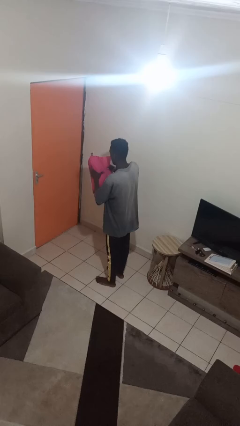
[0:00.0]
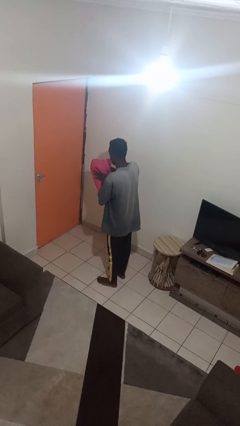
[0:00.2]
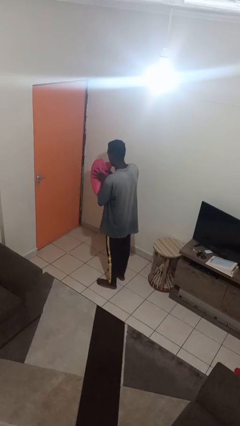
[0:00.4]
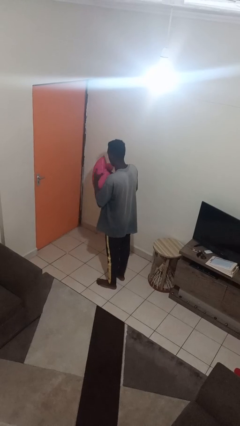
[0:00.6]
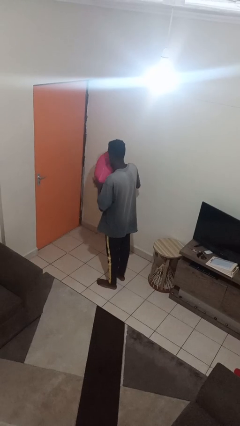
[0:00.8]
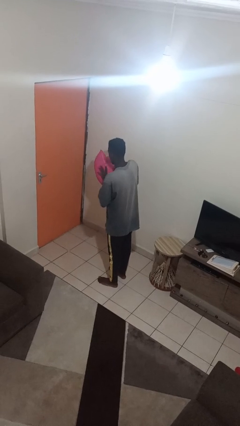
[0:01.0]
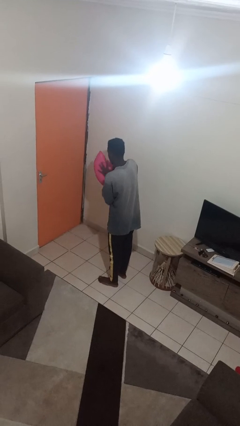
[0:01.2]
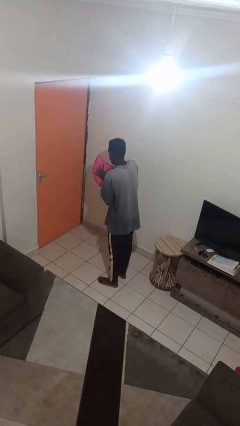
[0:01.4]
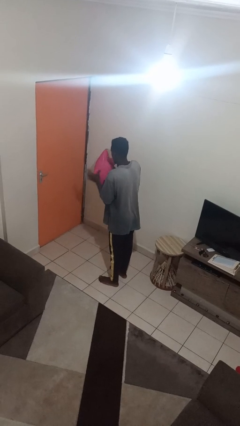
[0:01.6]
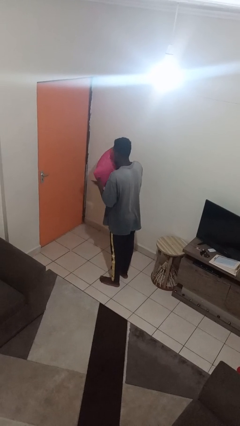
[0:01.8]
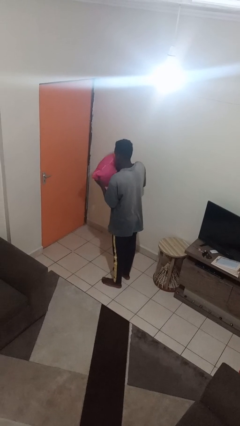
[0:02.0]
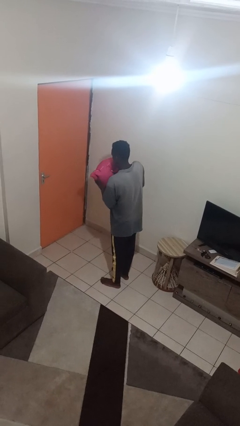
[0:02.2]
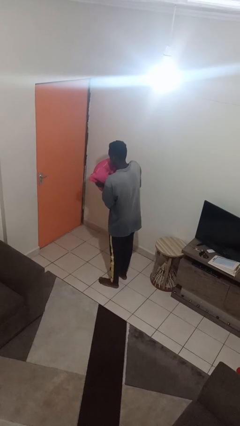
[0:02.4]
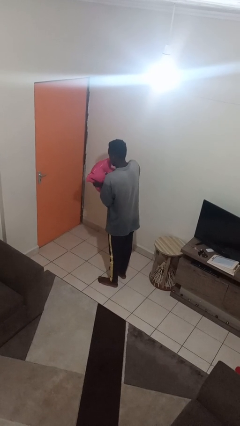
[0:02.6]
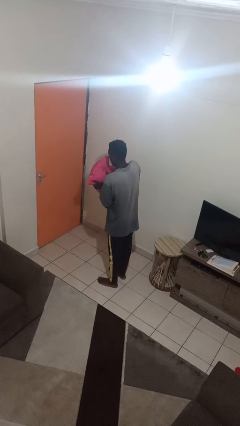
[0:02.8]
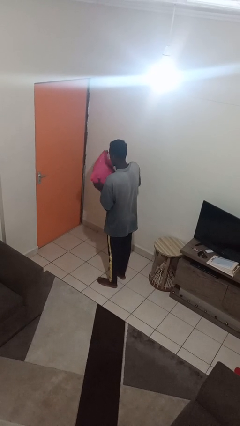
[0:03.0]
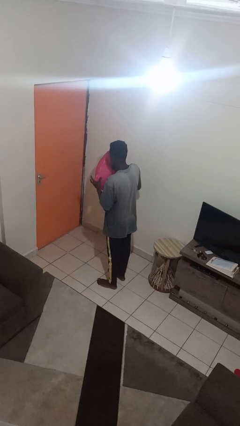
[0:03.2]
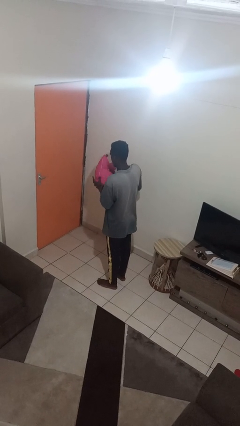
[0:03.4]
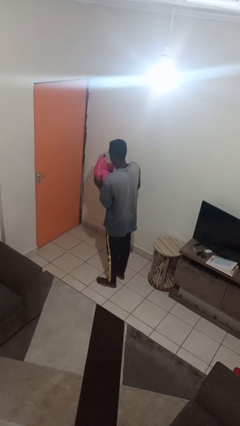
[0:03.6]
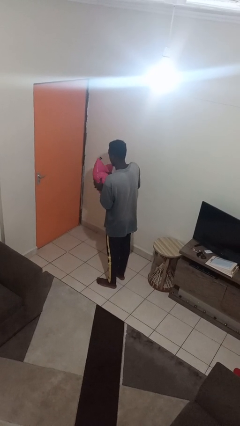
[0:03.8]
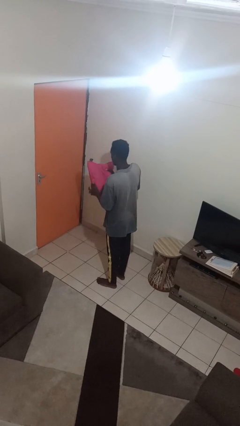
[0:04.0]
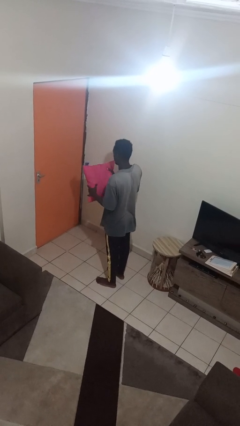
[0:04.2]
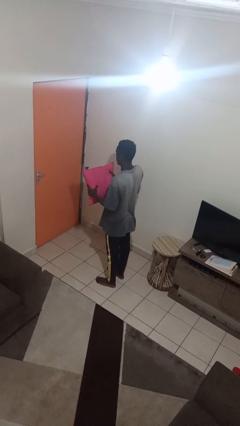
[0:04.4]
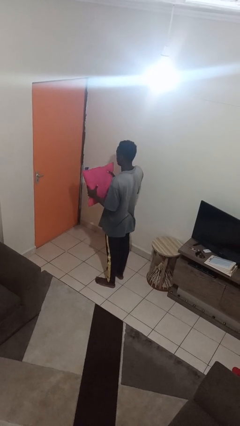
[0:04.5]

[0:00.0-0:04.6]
person squeezes object

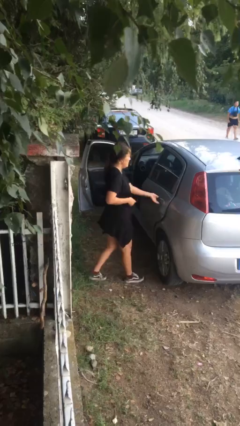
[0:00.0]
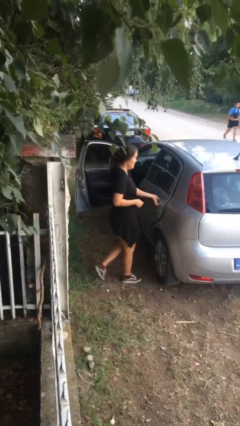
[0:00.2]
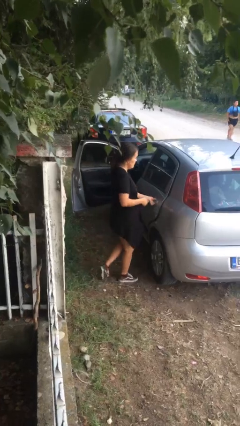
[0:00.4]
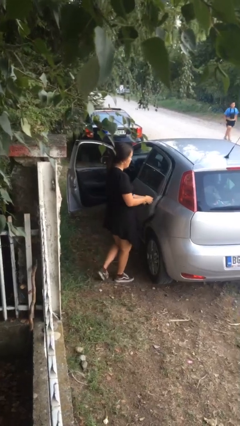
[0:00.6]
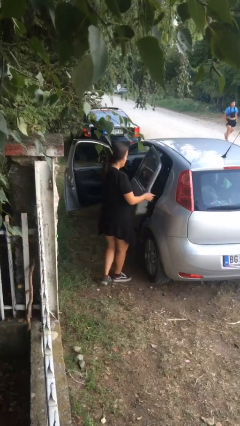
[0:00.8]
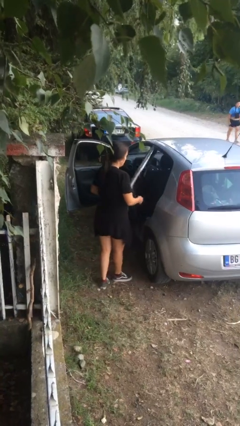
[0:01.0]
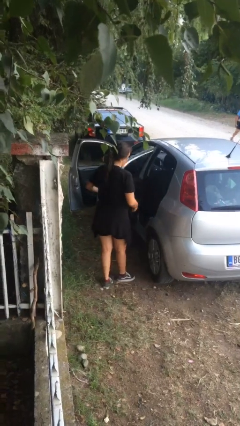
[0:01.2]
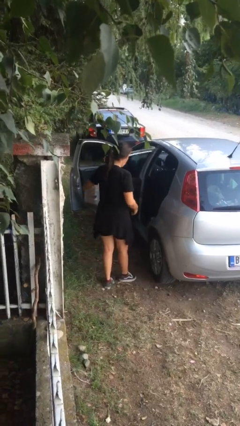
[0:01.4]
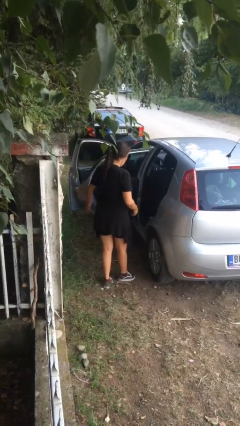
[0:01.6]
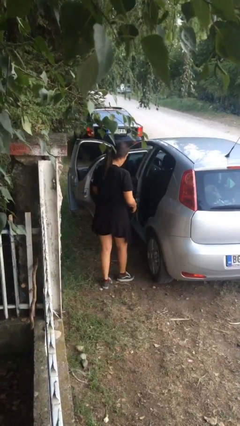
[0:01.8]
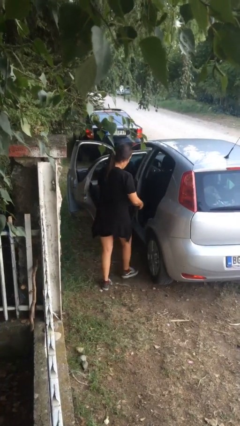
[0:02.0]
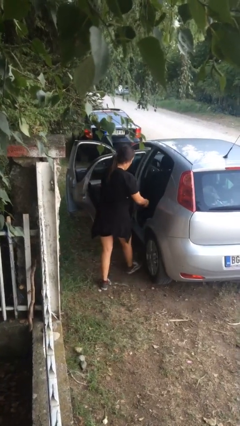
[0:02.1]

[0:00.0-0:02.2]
person opens car door

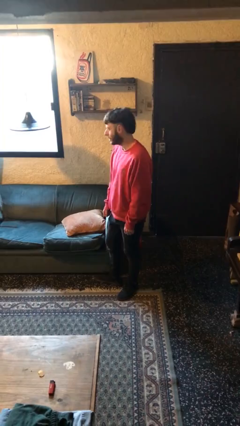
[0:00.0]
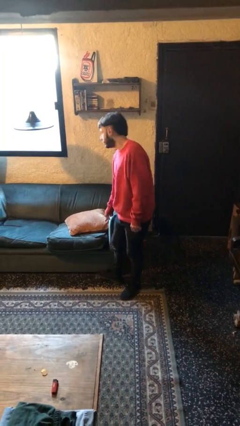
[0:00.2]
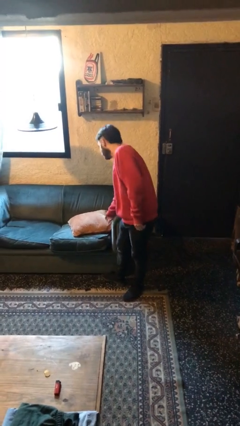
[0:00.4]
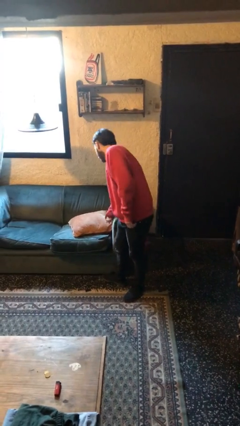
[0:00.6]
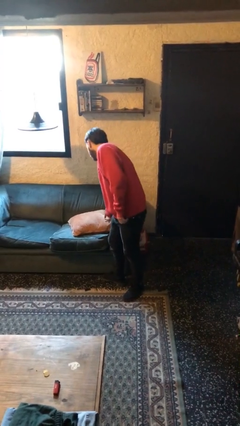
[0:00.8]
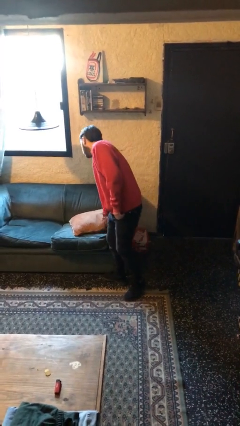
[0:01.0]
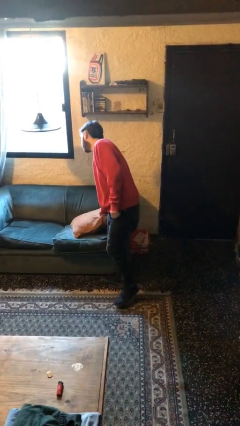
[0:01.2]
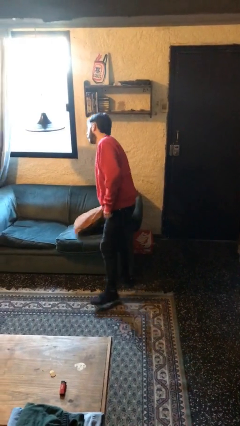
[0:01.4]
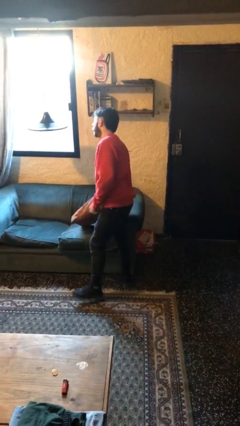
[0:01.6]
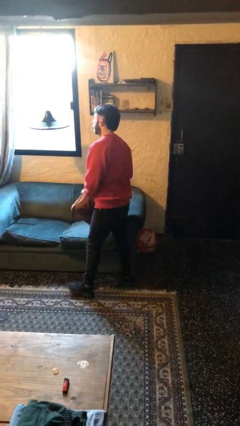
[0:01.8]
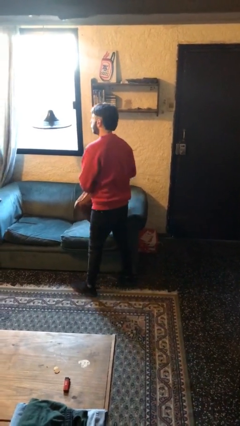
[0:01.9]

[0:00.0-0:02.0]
person picks up object from couch

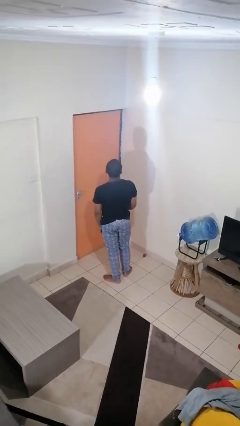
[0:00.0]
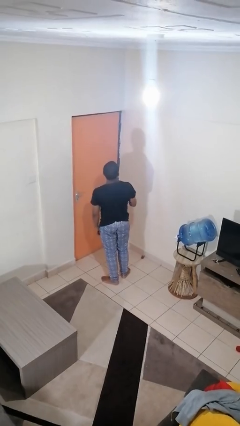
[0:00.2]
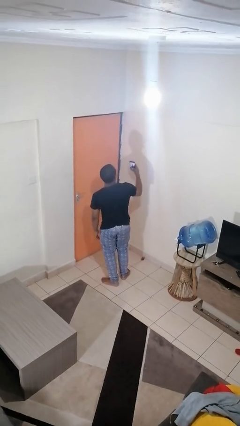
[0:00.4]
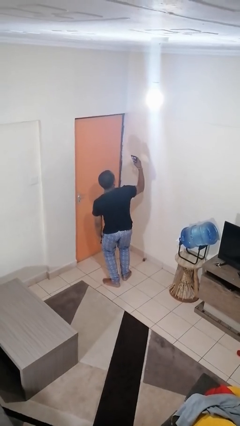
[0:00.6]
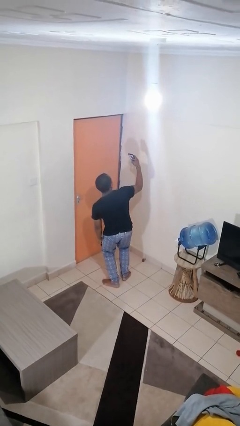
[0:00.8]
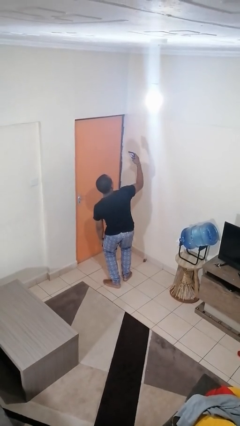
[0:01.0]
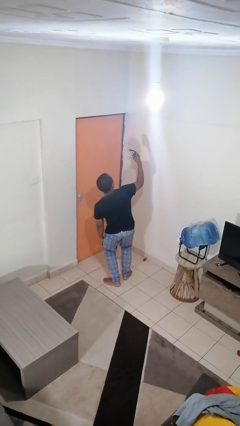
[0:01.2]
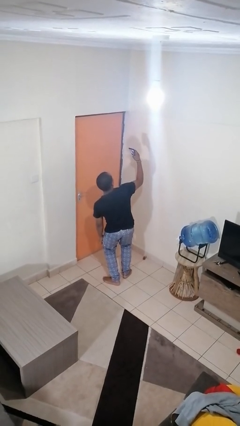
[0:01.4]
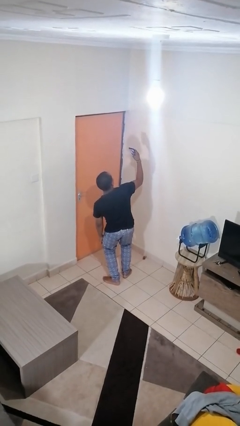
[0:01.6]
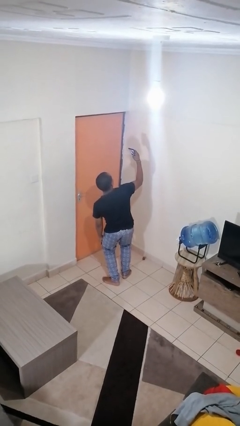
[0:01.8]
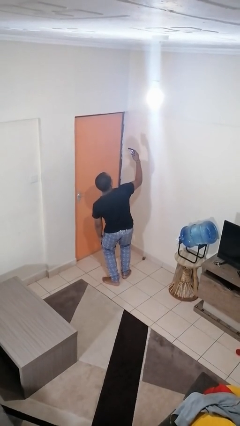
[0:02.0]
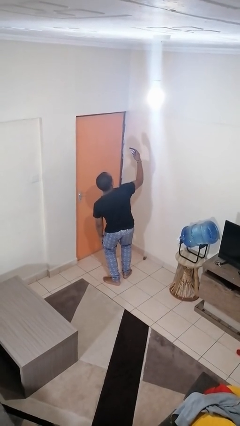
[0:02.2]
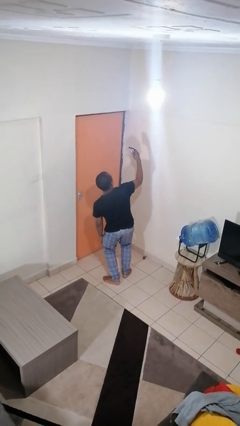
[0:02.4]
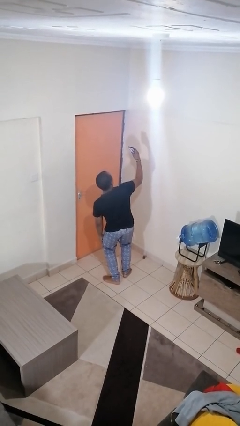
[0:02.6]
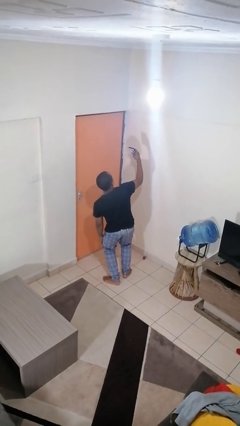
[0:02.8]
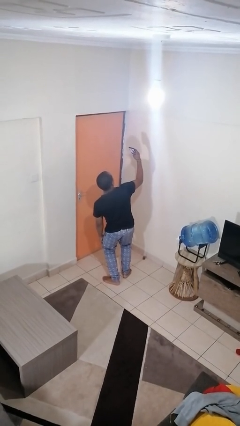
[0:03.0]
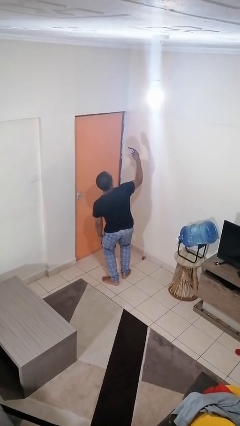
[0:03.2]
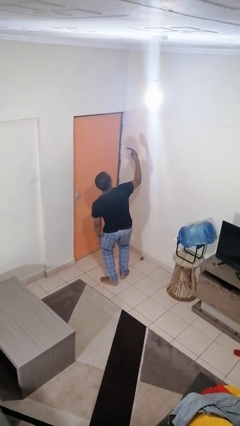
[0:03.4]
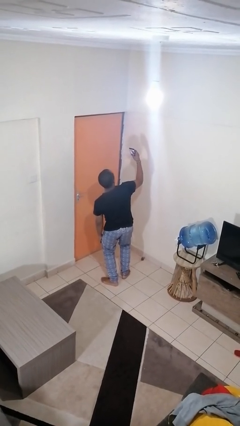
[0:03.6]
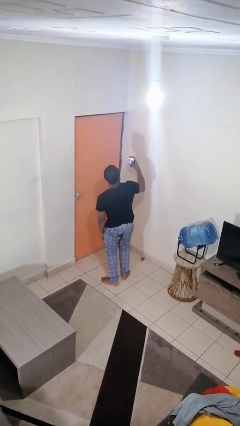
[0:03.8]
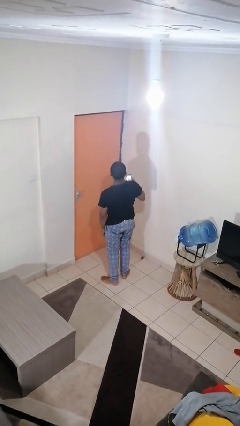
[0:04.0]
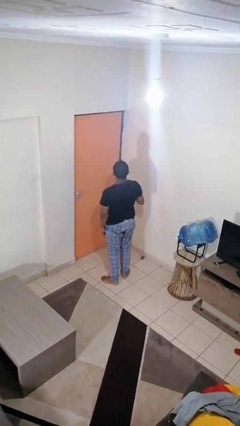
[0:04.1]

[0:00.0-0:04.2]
person takes selfie

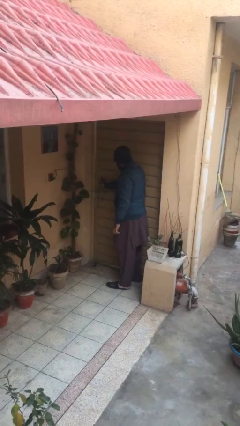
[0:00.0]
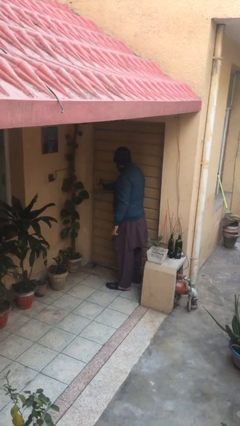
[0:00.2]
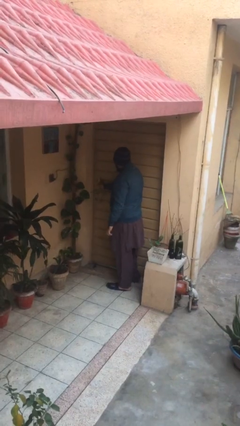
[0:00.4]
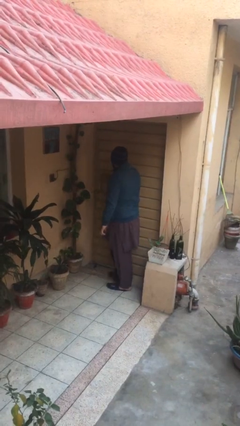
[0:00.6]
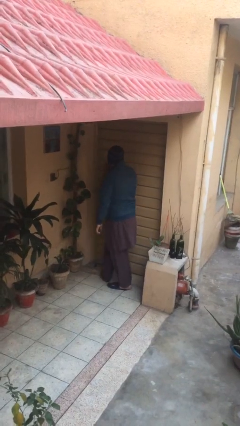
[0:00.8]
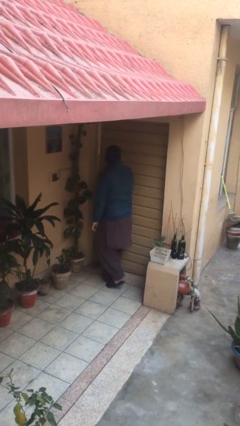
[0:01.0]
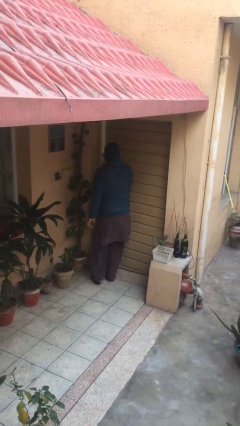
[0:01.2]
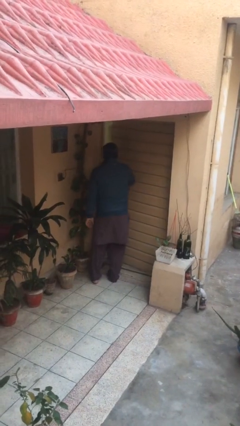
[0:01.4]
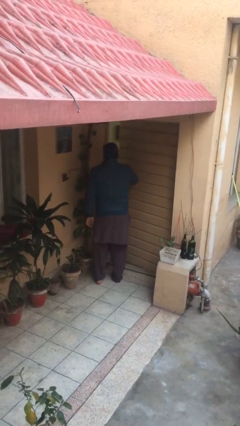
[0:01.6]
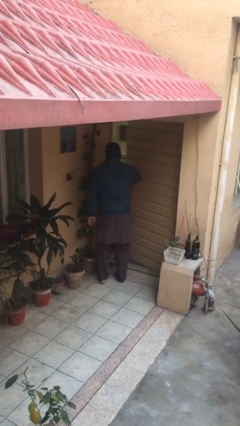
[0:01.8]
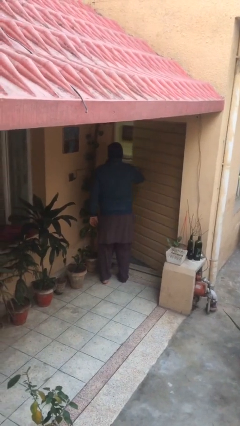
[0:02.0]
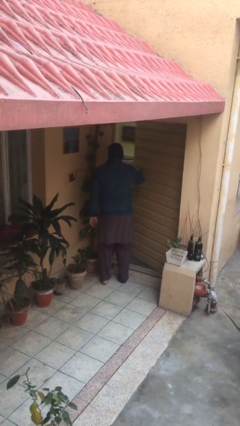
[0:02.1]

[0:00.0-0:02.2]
person opens facility door

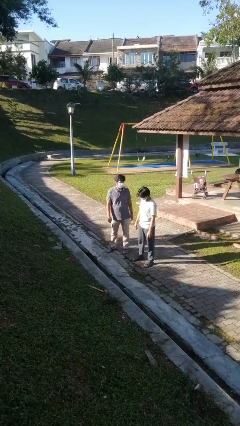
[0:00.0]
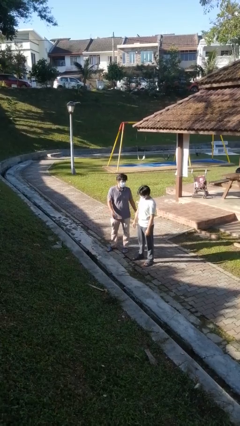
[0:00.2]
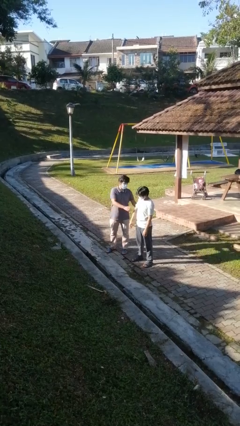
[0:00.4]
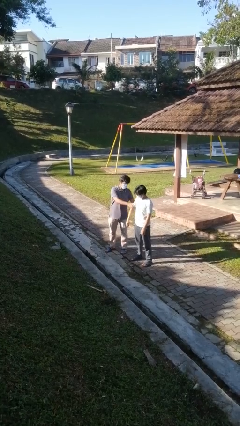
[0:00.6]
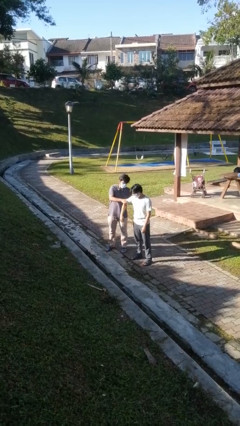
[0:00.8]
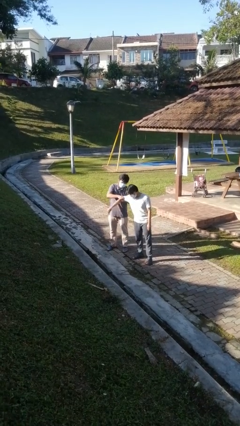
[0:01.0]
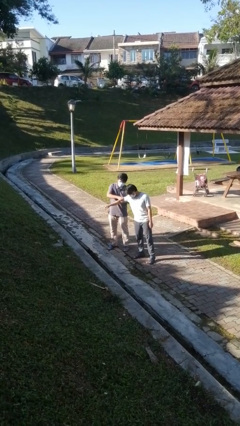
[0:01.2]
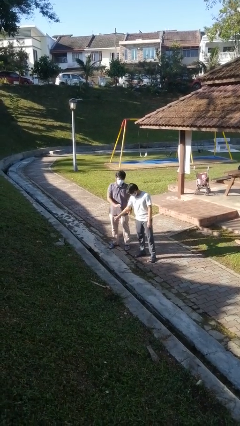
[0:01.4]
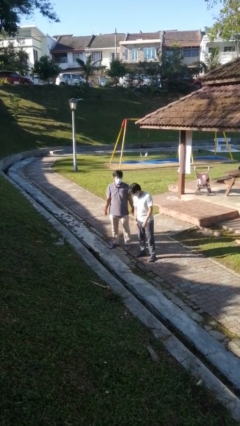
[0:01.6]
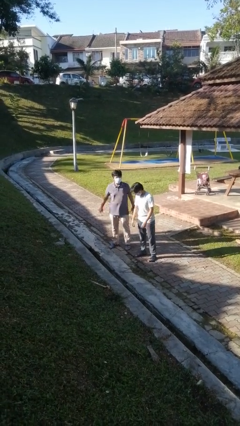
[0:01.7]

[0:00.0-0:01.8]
person grabs person by bicep

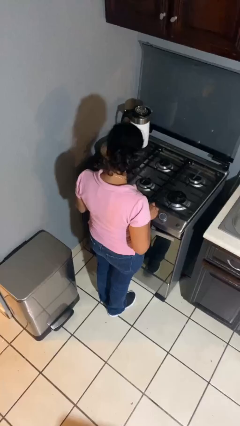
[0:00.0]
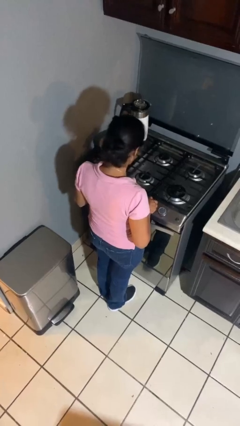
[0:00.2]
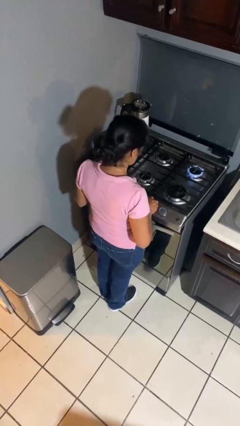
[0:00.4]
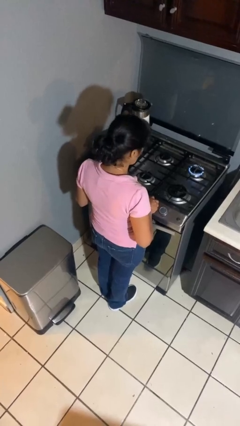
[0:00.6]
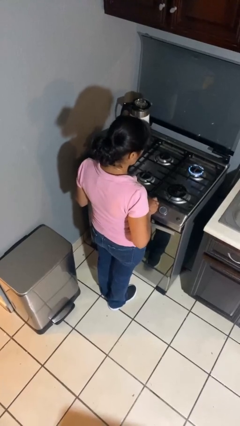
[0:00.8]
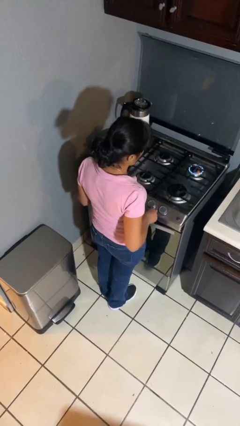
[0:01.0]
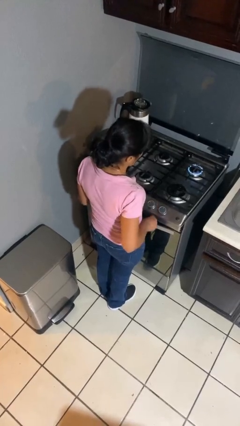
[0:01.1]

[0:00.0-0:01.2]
person turns on stovetop
